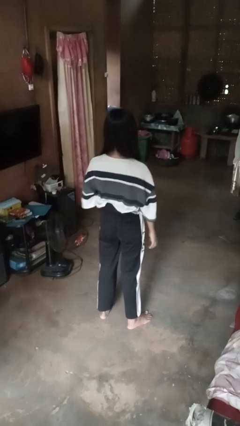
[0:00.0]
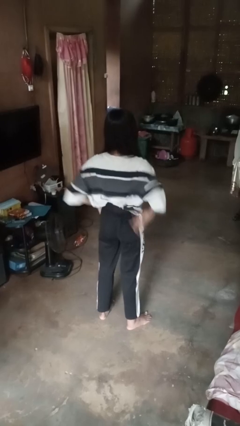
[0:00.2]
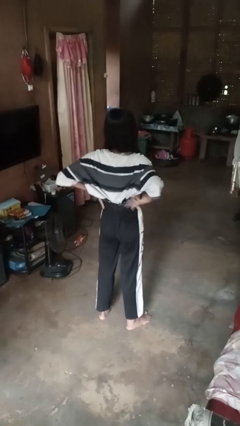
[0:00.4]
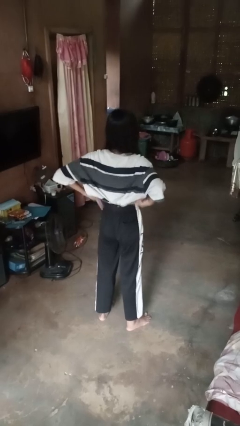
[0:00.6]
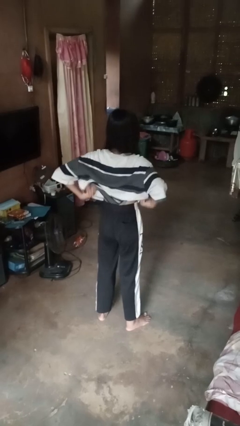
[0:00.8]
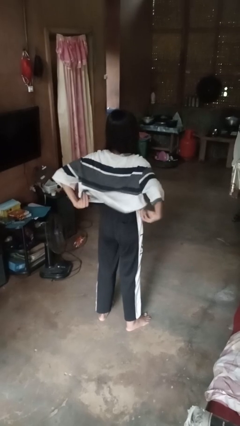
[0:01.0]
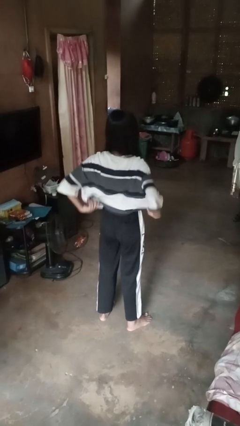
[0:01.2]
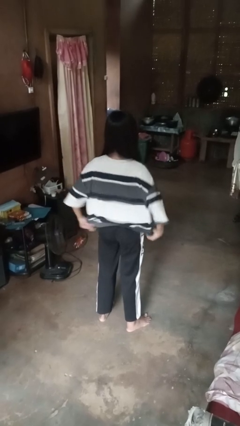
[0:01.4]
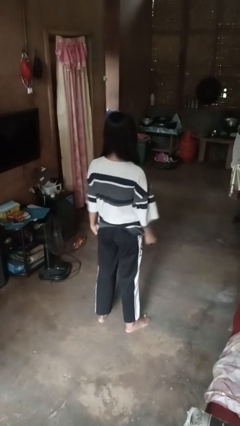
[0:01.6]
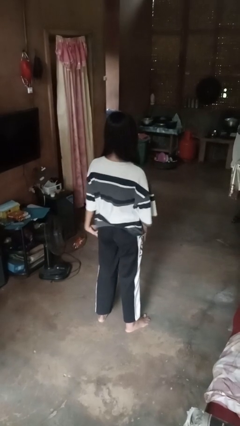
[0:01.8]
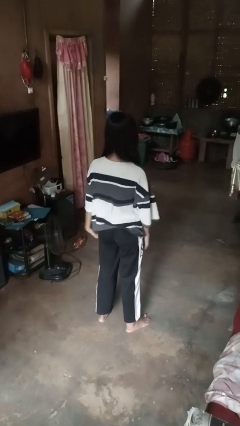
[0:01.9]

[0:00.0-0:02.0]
person untucks shirt

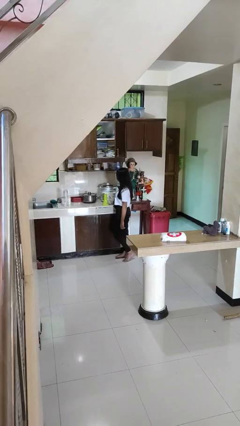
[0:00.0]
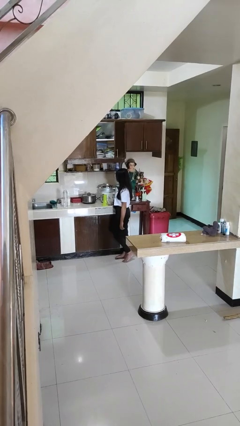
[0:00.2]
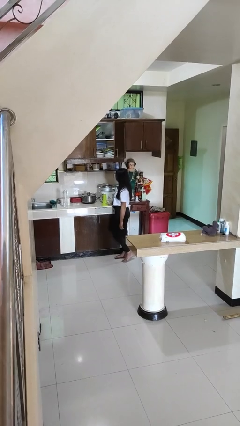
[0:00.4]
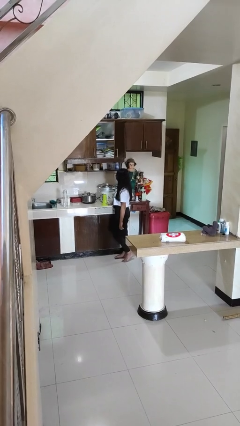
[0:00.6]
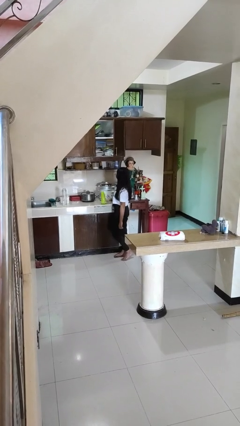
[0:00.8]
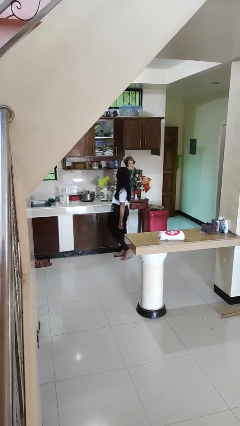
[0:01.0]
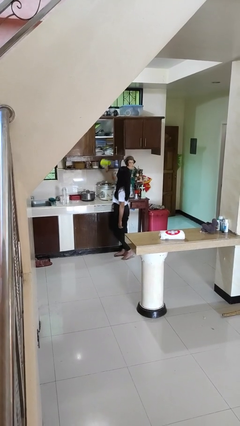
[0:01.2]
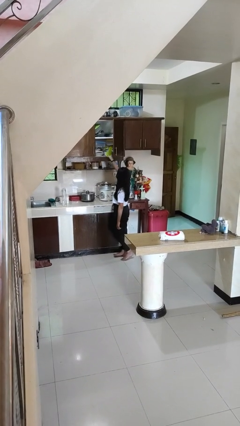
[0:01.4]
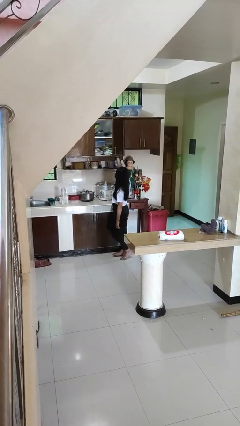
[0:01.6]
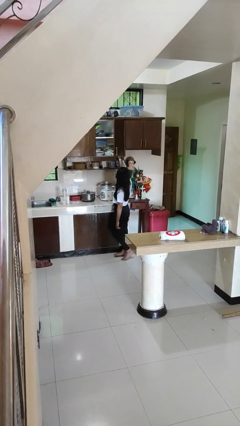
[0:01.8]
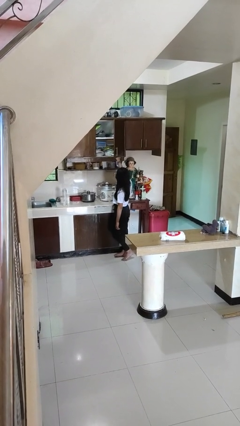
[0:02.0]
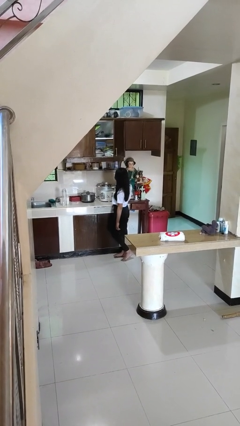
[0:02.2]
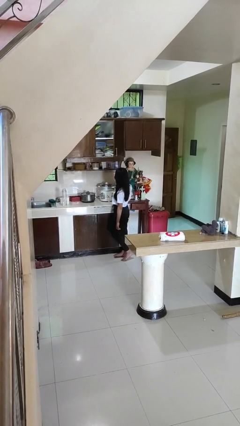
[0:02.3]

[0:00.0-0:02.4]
person puts down object into cabinet

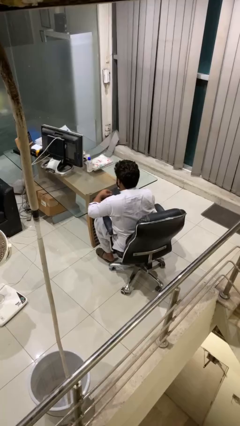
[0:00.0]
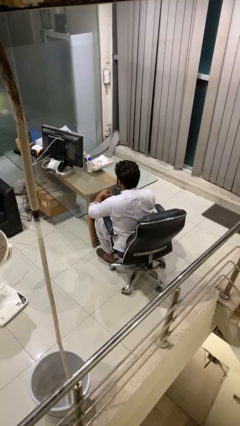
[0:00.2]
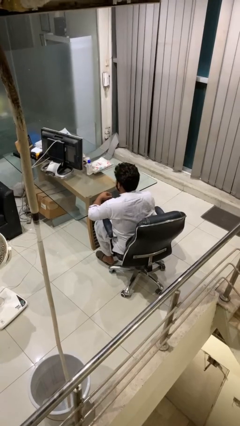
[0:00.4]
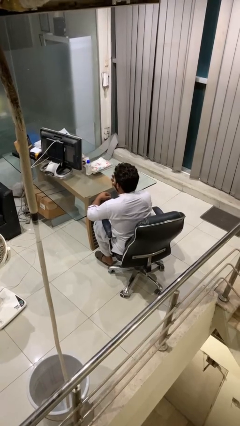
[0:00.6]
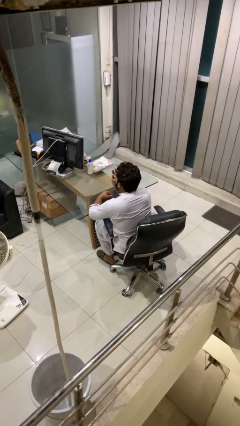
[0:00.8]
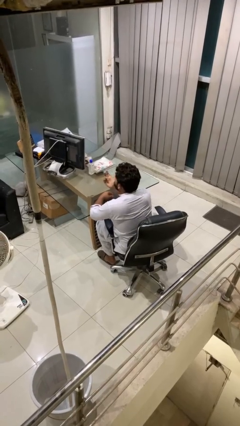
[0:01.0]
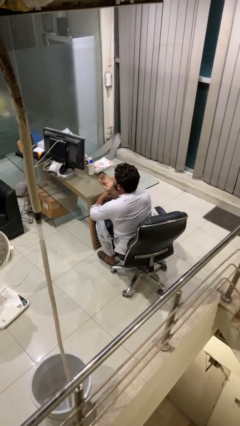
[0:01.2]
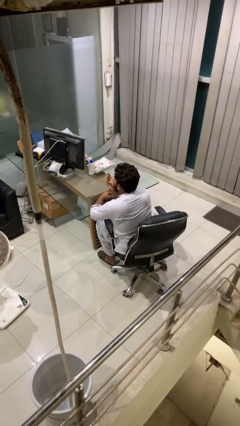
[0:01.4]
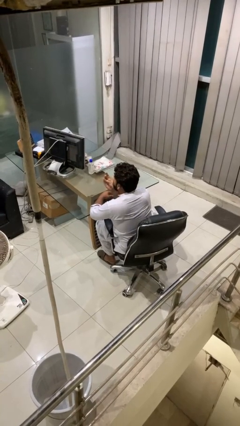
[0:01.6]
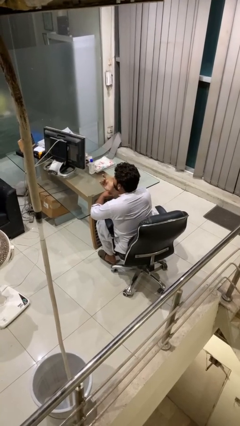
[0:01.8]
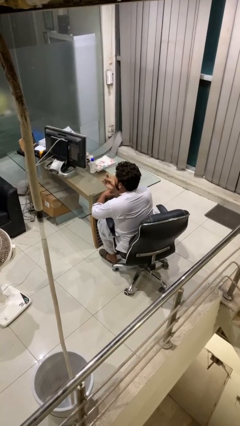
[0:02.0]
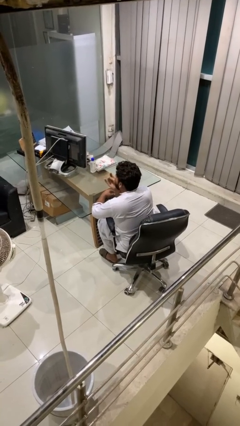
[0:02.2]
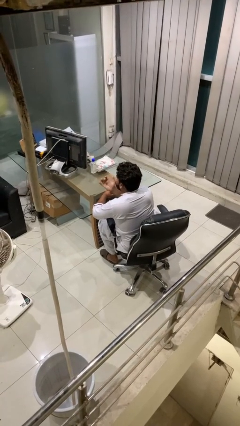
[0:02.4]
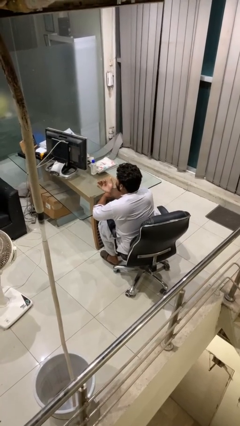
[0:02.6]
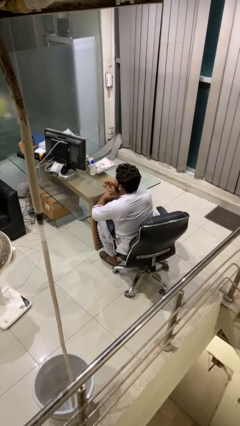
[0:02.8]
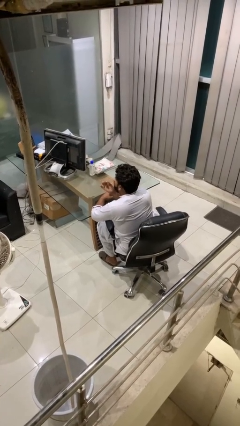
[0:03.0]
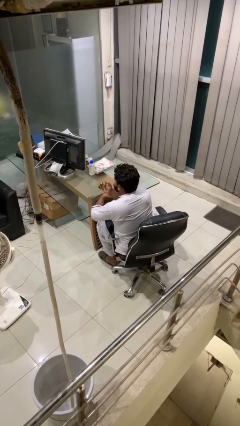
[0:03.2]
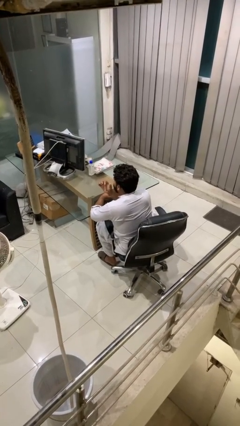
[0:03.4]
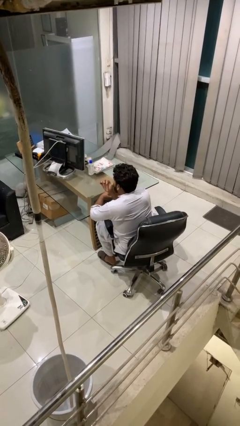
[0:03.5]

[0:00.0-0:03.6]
person licks fingers

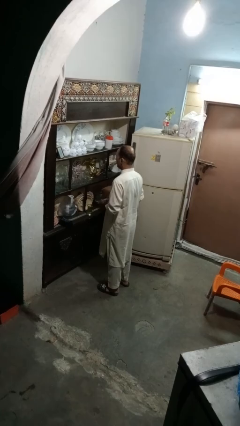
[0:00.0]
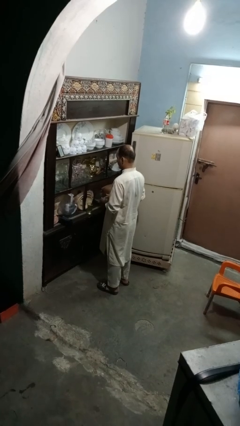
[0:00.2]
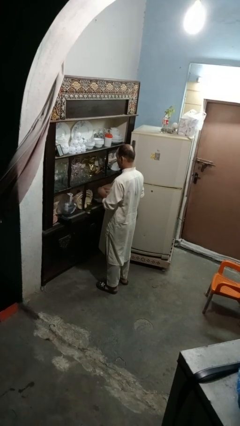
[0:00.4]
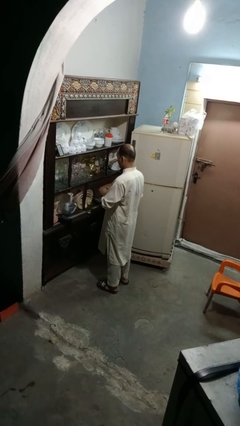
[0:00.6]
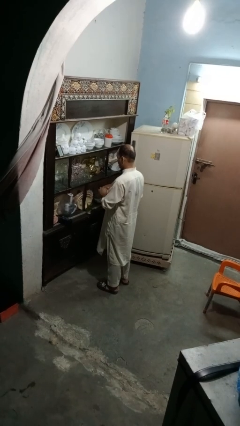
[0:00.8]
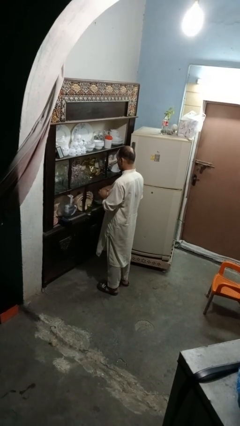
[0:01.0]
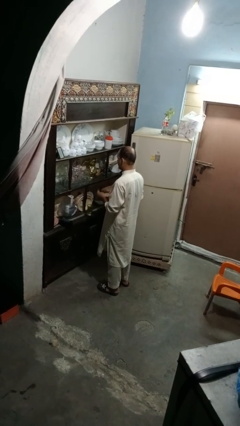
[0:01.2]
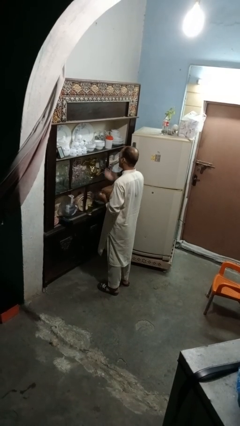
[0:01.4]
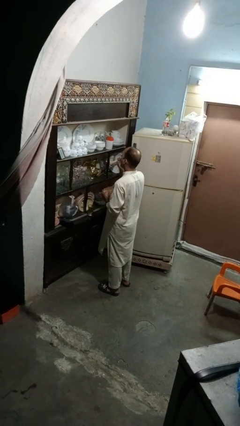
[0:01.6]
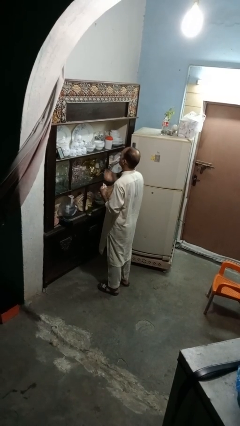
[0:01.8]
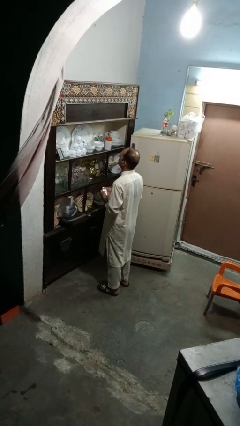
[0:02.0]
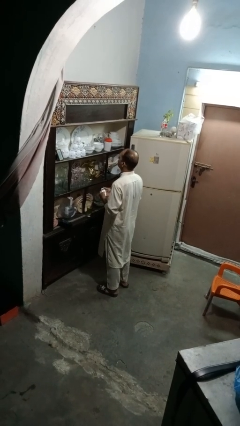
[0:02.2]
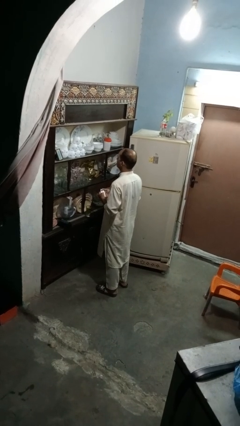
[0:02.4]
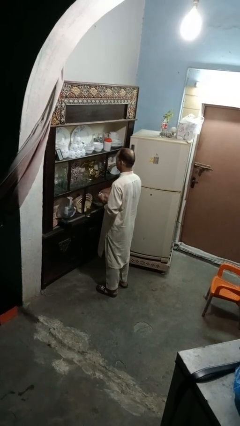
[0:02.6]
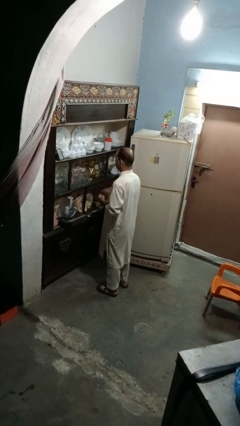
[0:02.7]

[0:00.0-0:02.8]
person takes medicine pills

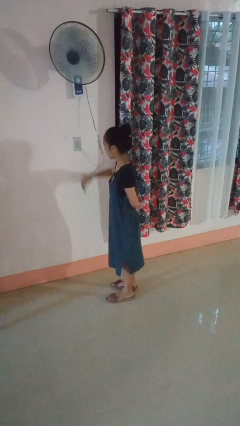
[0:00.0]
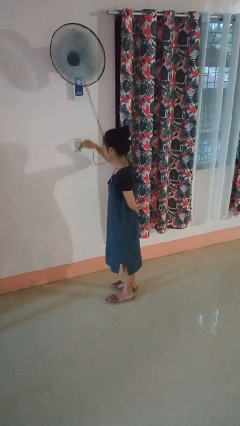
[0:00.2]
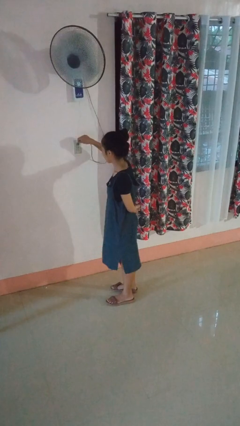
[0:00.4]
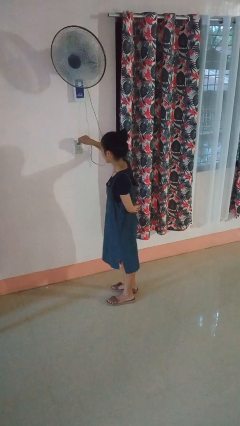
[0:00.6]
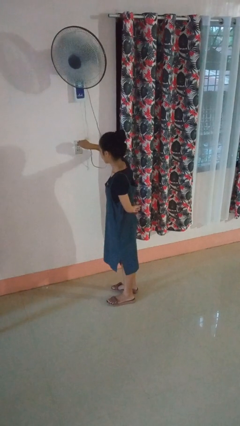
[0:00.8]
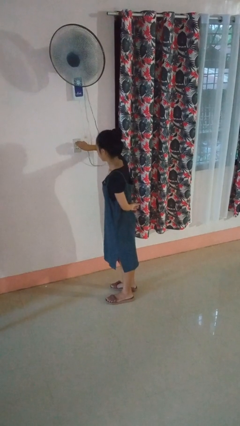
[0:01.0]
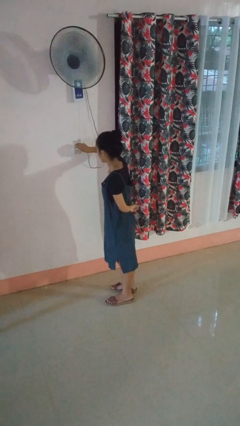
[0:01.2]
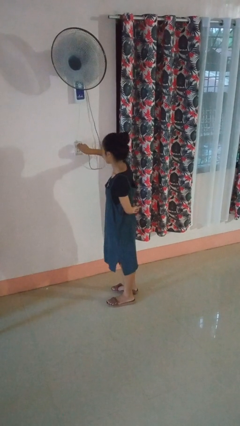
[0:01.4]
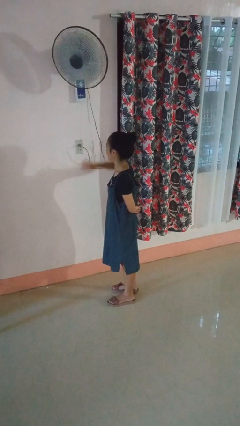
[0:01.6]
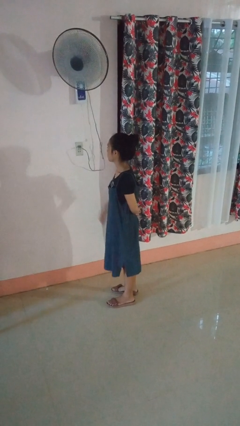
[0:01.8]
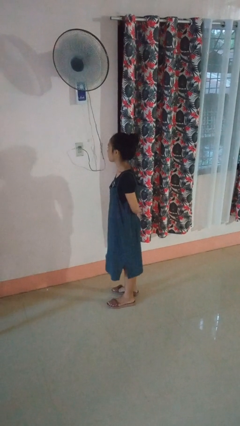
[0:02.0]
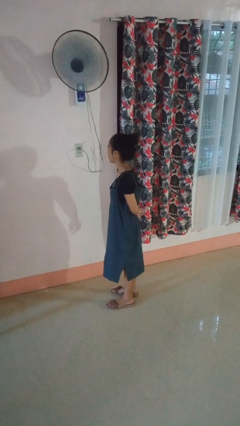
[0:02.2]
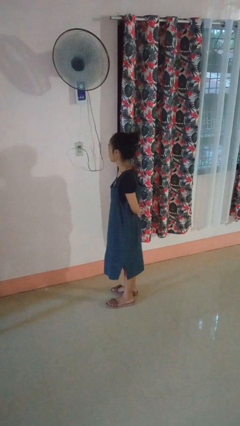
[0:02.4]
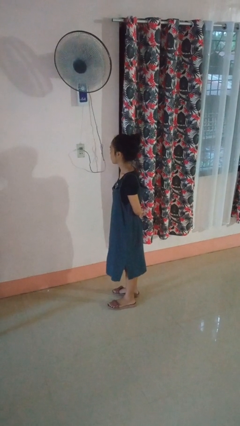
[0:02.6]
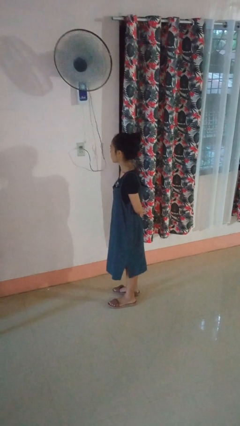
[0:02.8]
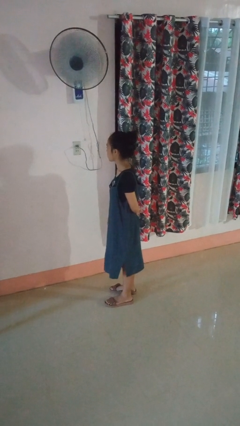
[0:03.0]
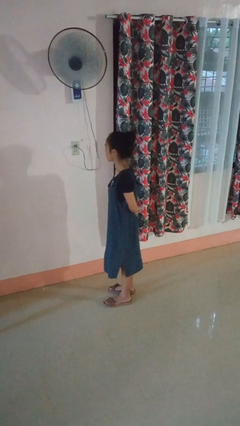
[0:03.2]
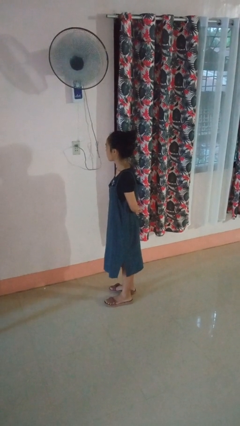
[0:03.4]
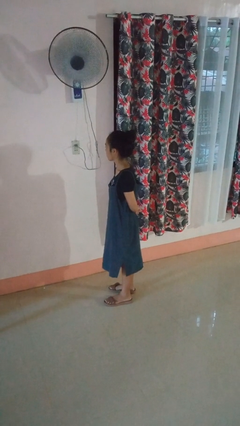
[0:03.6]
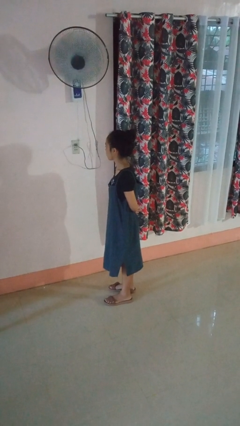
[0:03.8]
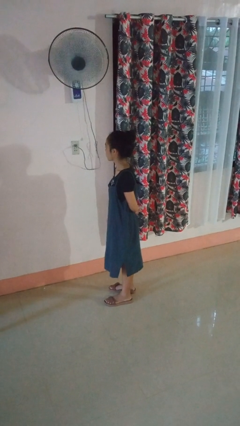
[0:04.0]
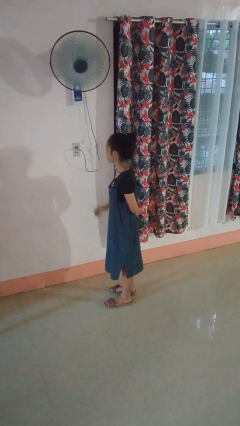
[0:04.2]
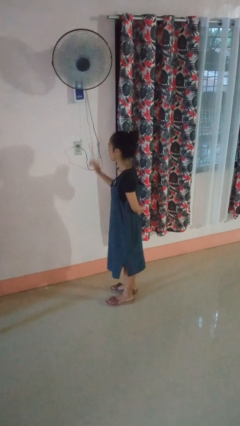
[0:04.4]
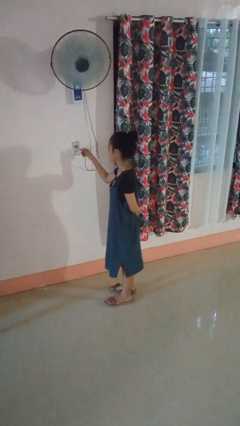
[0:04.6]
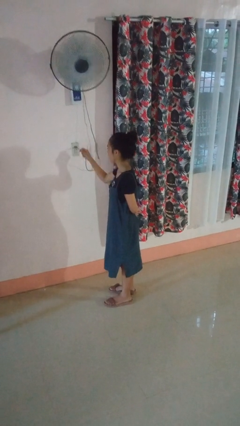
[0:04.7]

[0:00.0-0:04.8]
person plugs into electrical socket

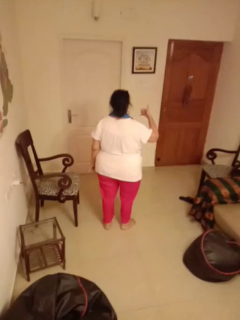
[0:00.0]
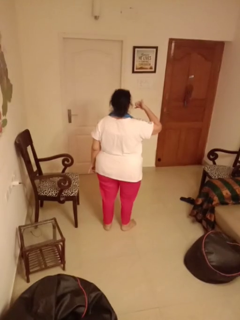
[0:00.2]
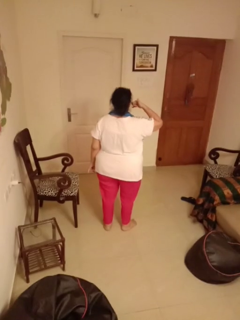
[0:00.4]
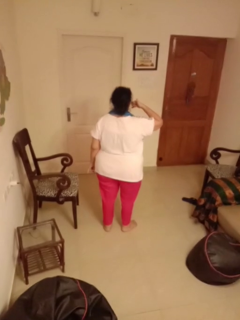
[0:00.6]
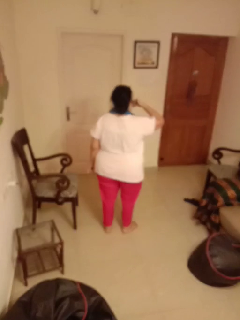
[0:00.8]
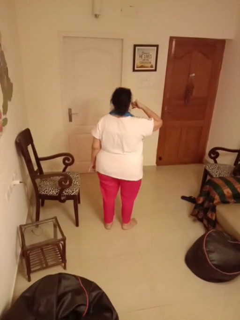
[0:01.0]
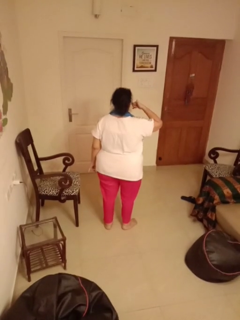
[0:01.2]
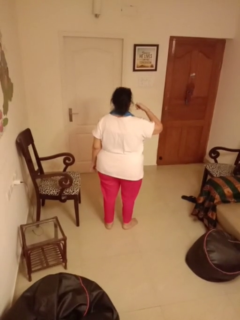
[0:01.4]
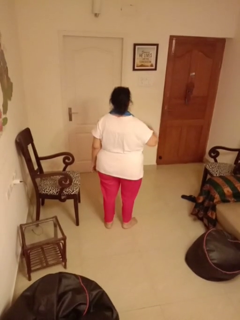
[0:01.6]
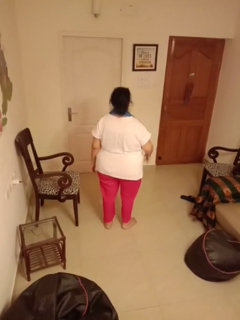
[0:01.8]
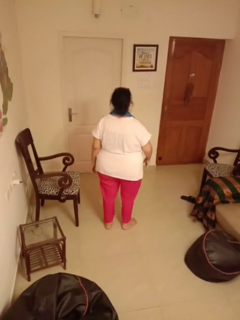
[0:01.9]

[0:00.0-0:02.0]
person gestures call me

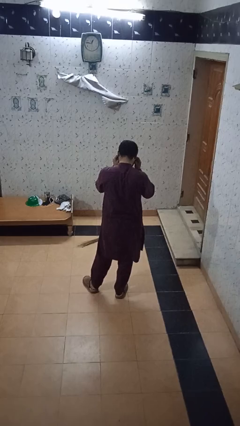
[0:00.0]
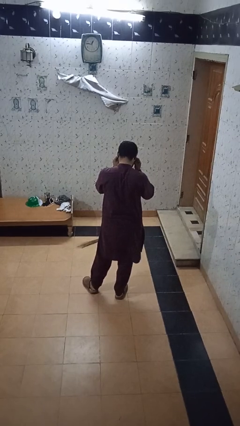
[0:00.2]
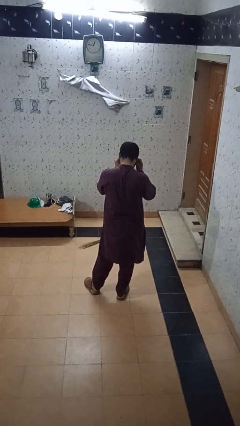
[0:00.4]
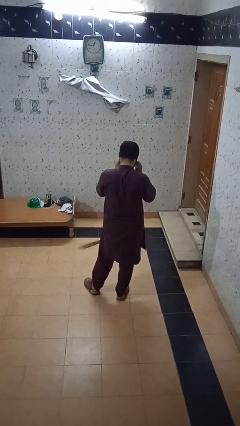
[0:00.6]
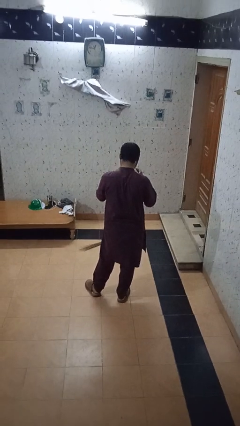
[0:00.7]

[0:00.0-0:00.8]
person puts on glasses
